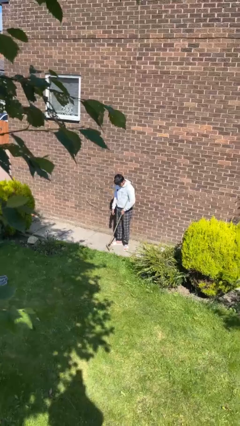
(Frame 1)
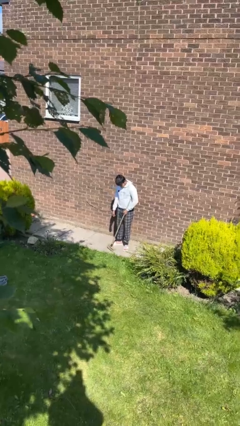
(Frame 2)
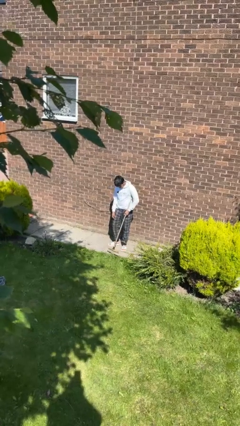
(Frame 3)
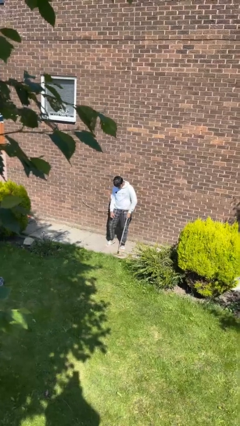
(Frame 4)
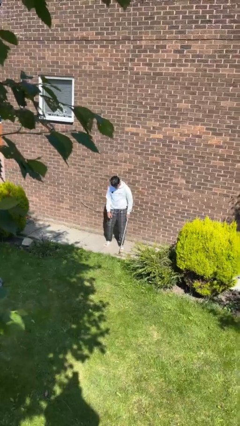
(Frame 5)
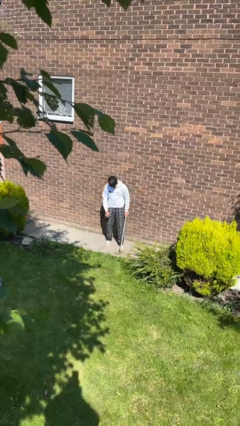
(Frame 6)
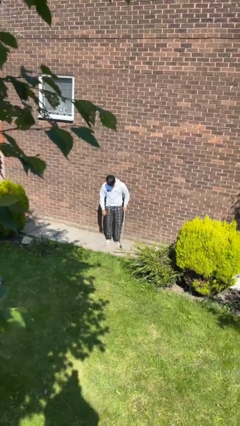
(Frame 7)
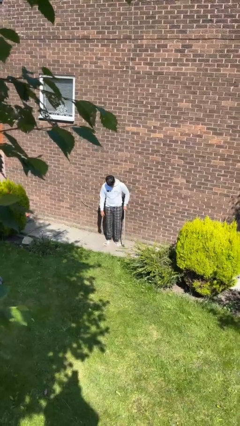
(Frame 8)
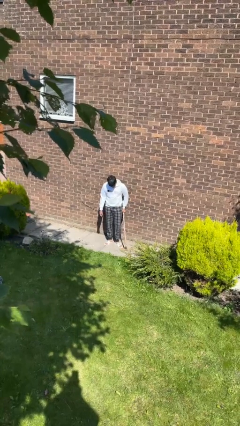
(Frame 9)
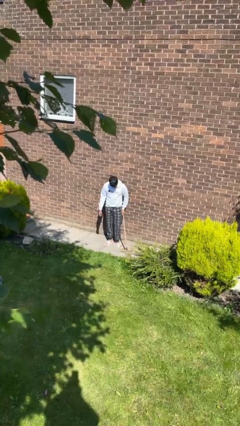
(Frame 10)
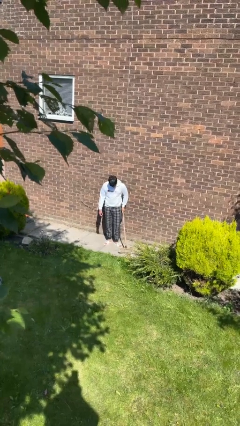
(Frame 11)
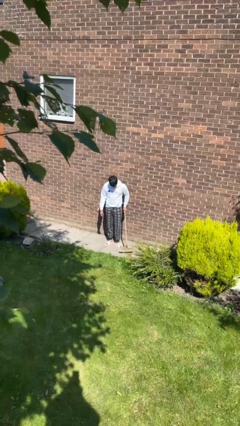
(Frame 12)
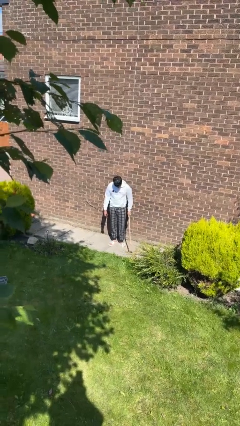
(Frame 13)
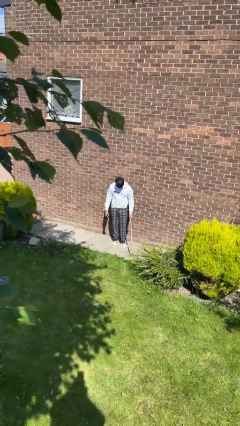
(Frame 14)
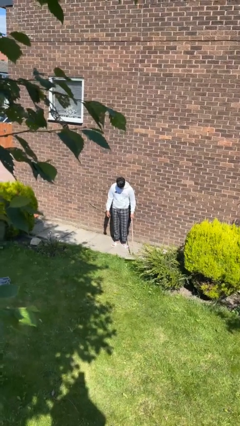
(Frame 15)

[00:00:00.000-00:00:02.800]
person sweeps floor

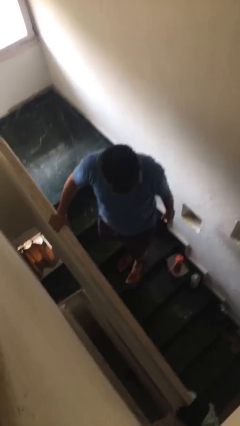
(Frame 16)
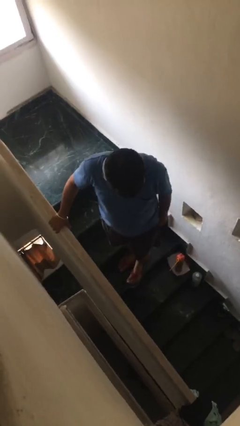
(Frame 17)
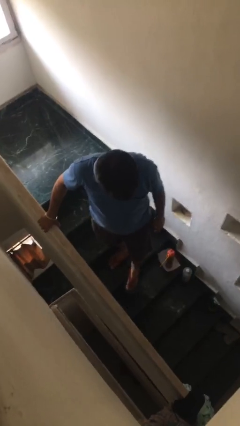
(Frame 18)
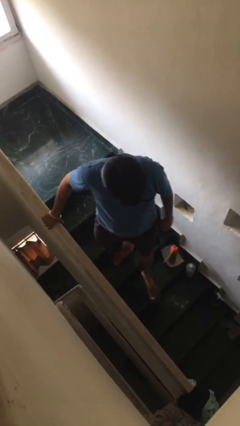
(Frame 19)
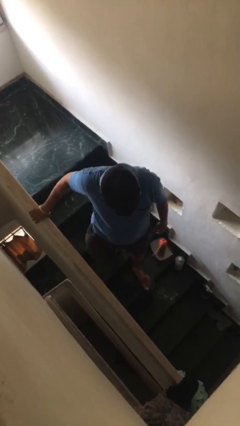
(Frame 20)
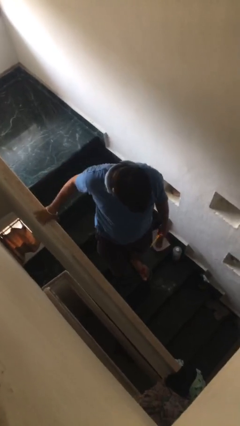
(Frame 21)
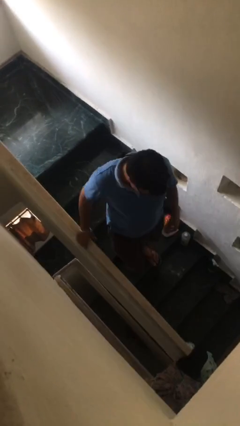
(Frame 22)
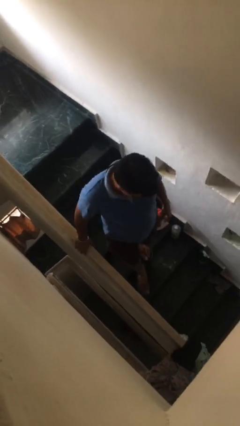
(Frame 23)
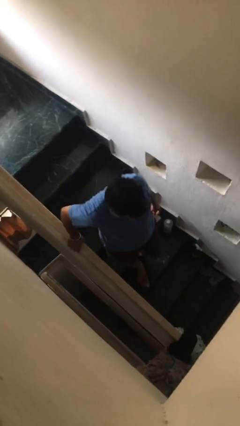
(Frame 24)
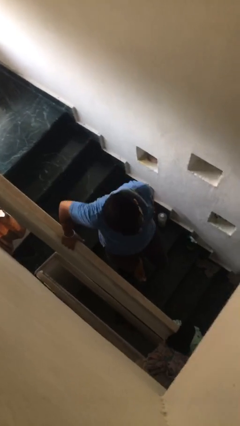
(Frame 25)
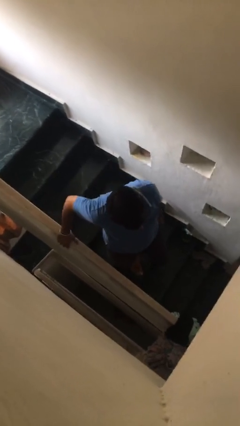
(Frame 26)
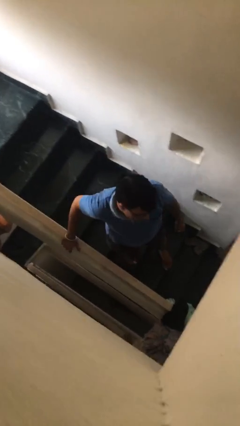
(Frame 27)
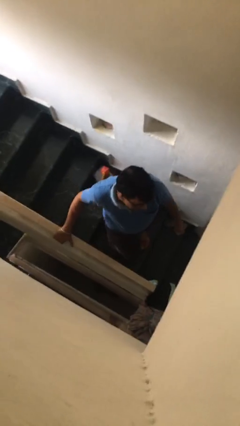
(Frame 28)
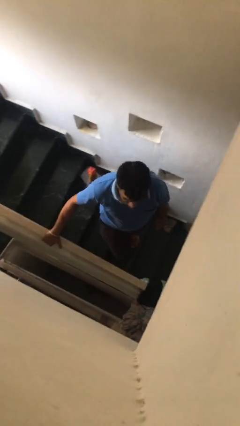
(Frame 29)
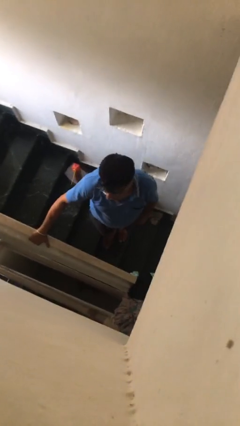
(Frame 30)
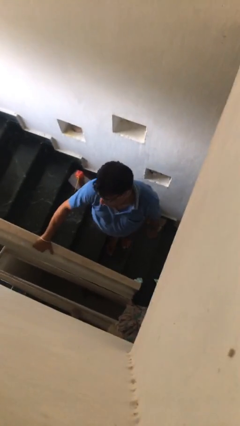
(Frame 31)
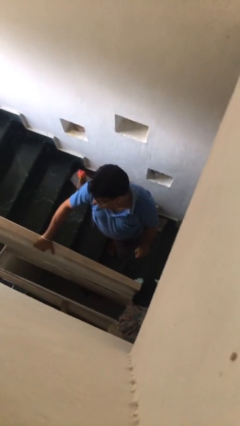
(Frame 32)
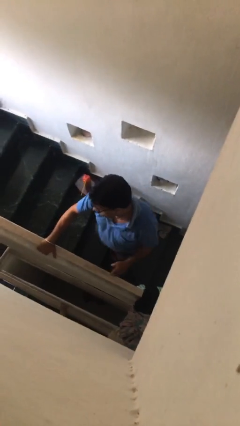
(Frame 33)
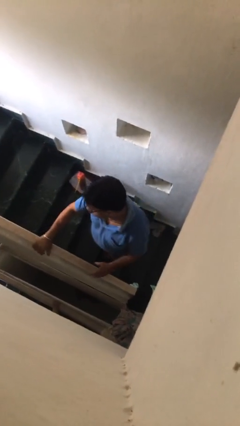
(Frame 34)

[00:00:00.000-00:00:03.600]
person climbs down stairs

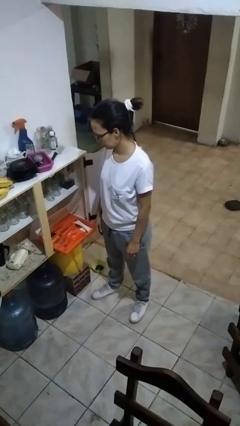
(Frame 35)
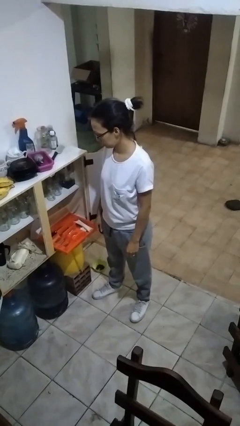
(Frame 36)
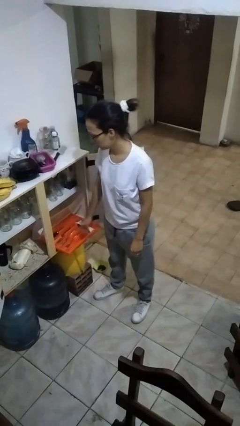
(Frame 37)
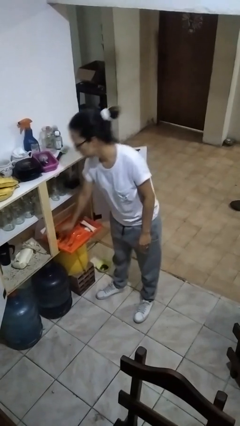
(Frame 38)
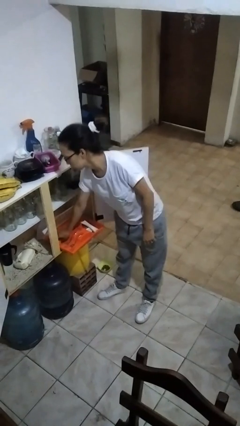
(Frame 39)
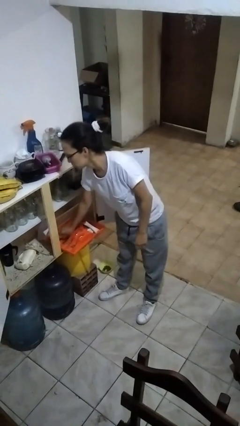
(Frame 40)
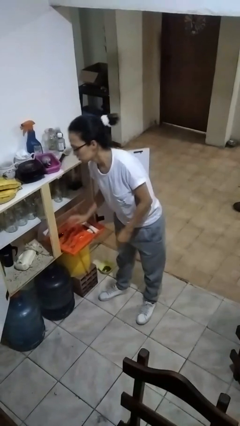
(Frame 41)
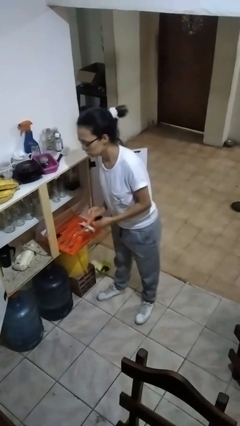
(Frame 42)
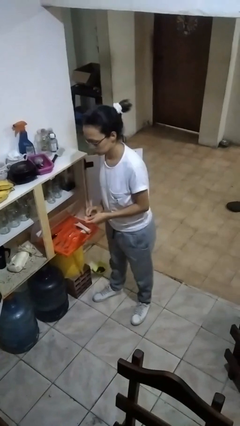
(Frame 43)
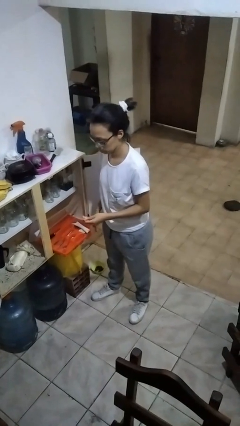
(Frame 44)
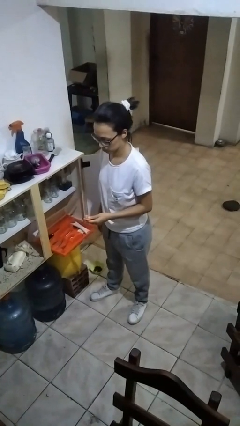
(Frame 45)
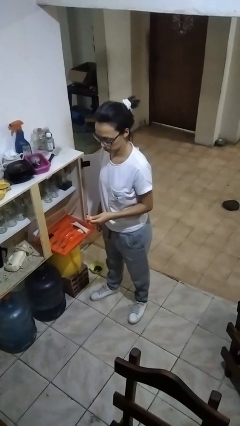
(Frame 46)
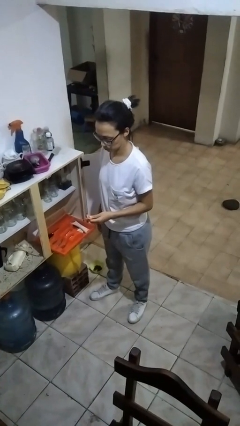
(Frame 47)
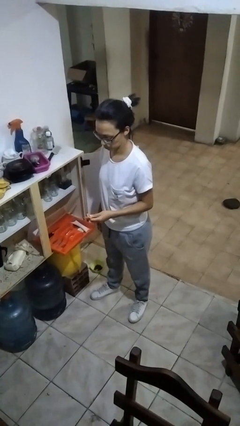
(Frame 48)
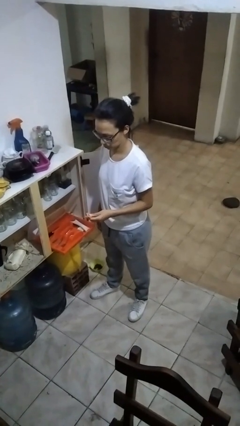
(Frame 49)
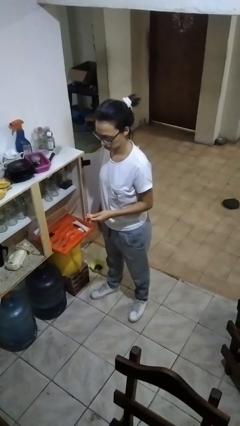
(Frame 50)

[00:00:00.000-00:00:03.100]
person takes object from kitchen drawer

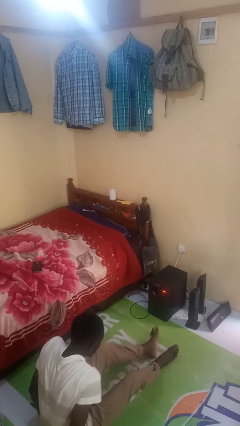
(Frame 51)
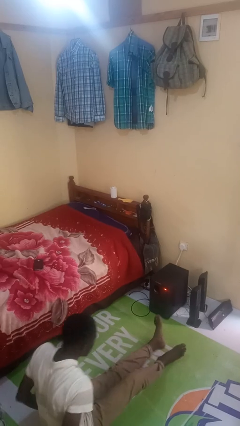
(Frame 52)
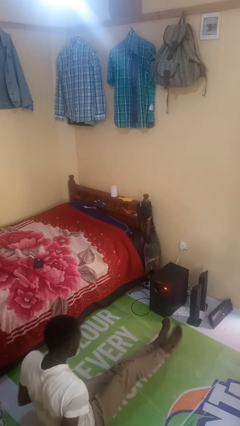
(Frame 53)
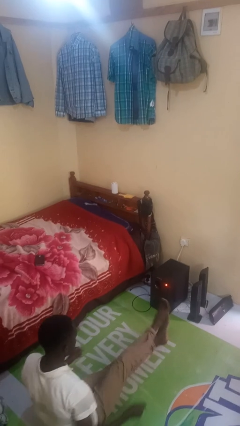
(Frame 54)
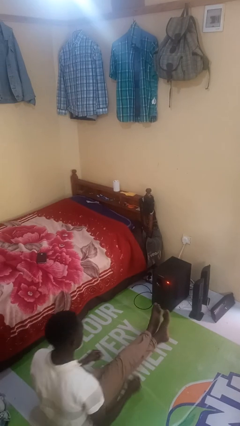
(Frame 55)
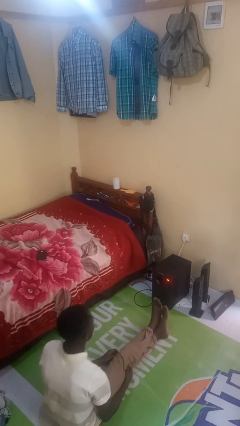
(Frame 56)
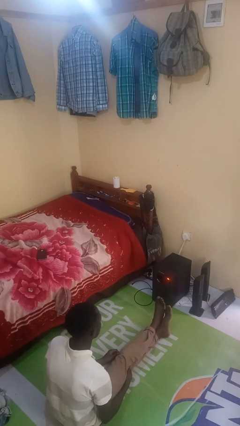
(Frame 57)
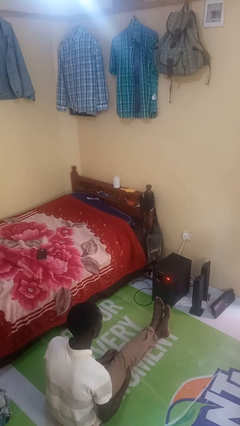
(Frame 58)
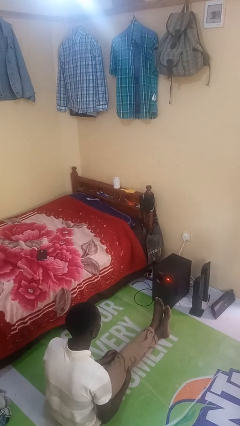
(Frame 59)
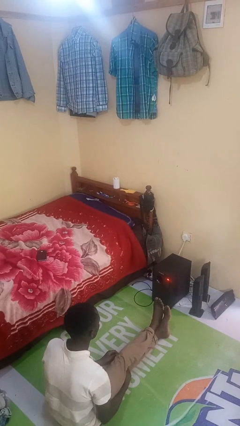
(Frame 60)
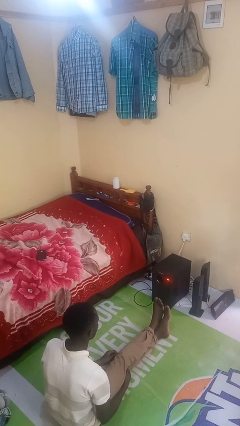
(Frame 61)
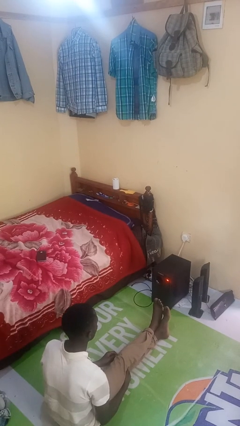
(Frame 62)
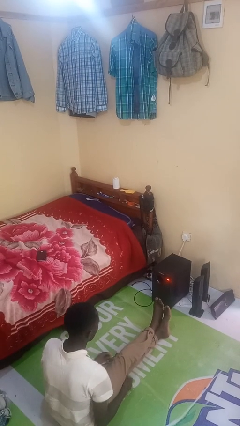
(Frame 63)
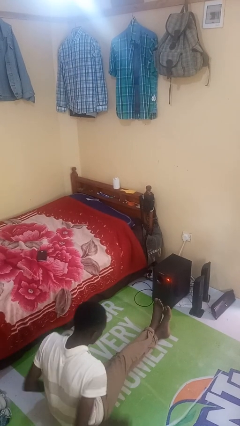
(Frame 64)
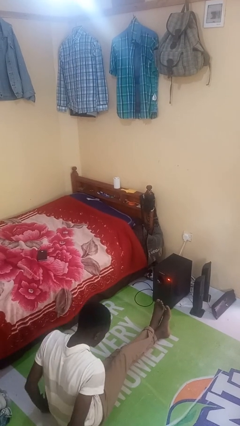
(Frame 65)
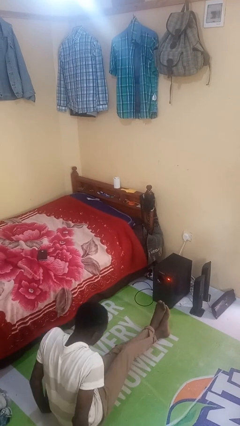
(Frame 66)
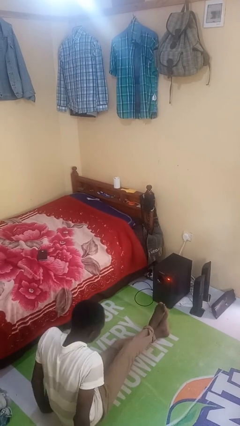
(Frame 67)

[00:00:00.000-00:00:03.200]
person sits crisscross

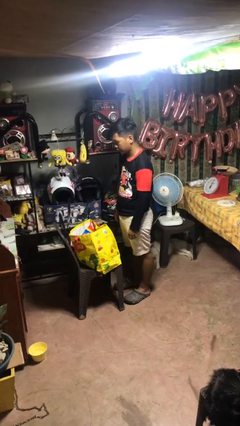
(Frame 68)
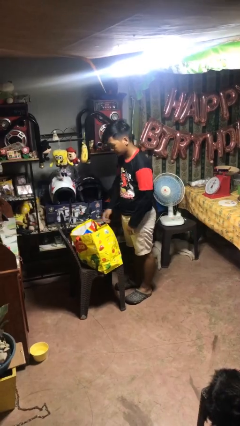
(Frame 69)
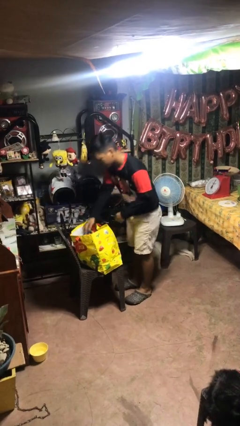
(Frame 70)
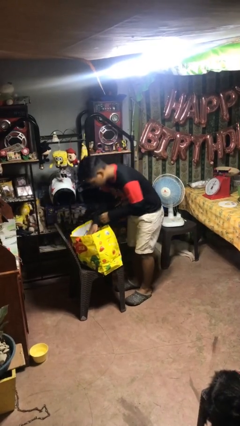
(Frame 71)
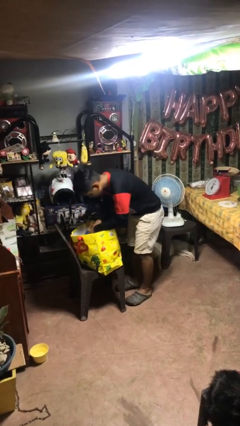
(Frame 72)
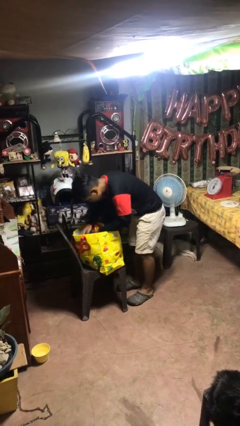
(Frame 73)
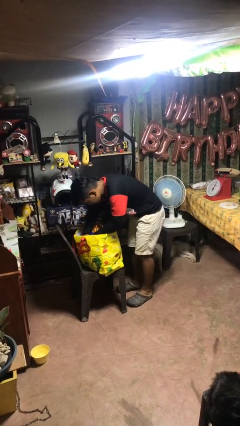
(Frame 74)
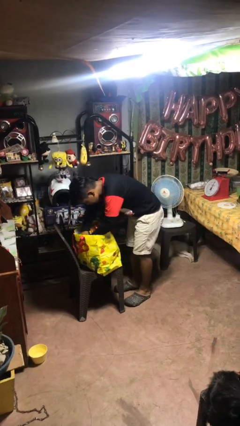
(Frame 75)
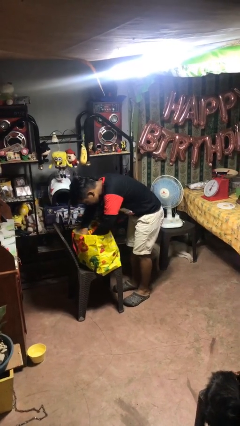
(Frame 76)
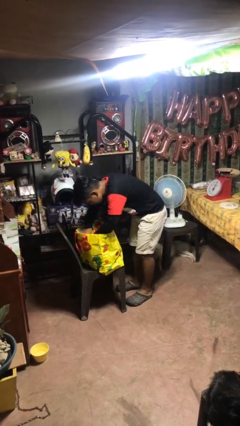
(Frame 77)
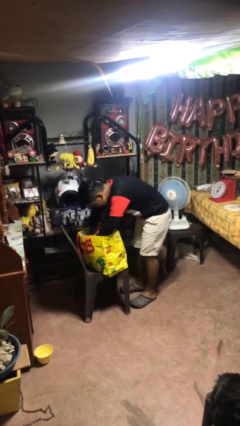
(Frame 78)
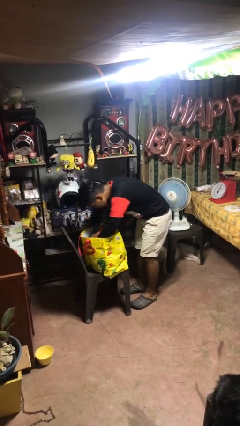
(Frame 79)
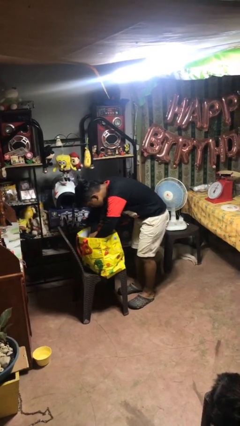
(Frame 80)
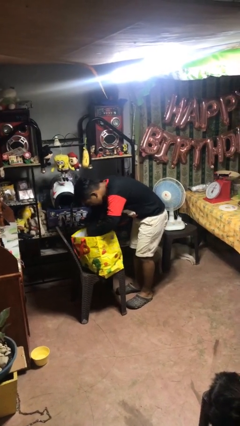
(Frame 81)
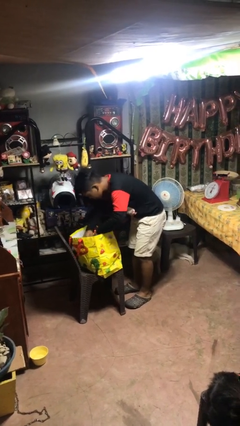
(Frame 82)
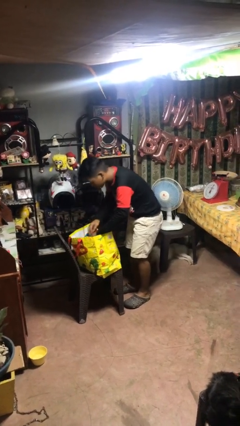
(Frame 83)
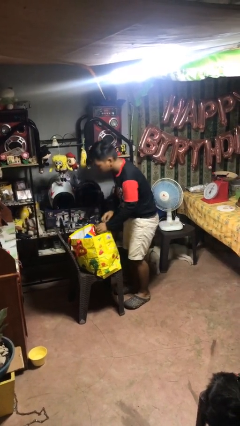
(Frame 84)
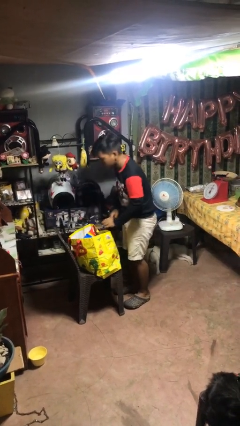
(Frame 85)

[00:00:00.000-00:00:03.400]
person searches in bag

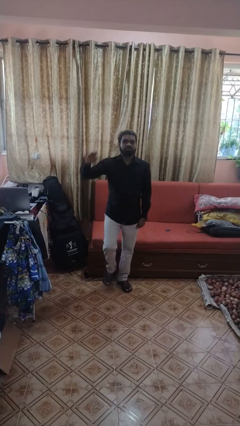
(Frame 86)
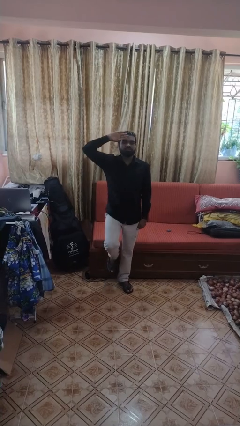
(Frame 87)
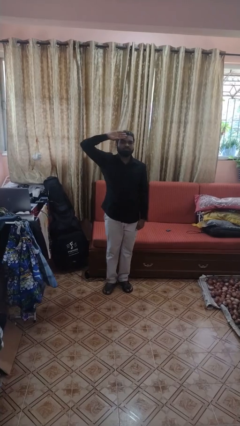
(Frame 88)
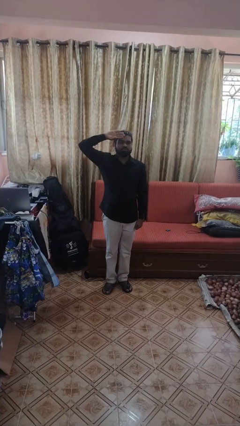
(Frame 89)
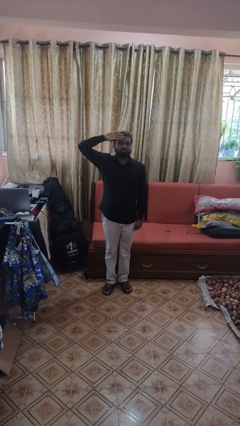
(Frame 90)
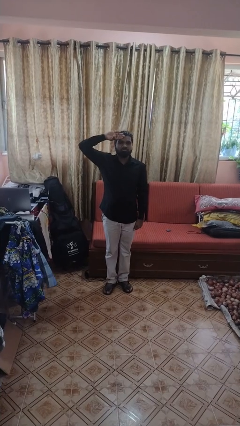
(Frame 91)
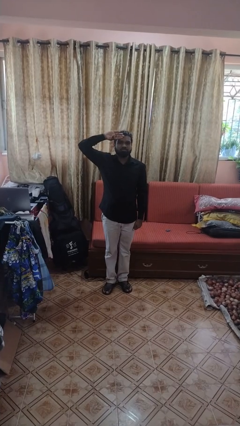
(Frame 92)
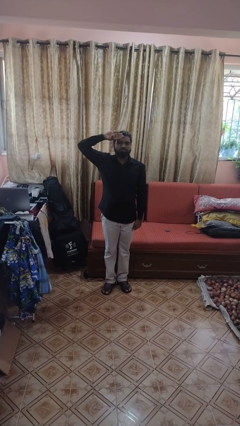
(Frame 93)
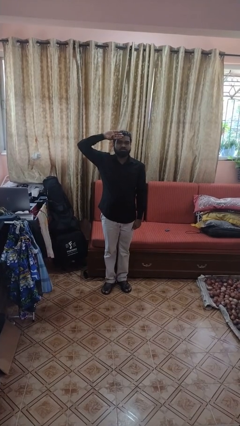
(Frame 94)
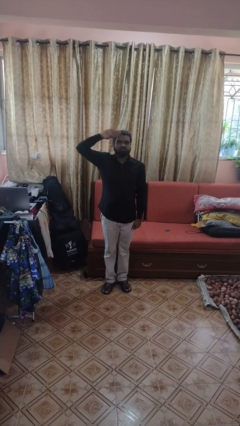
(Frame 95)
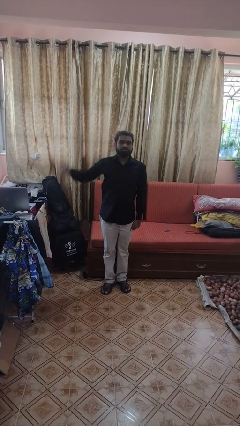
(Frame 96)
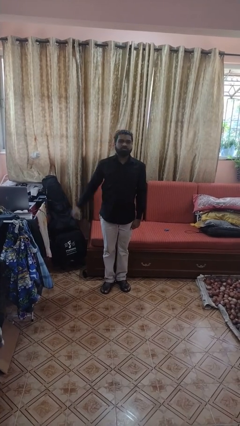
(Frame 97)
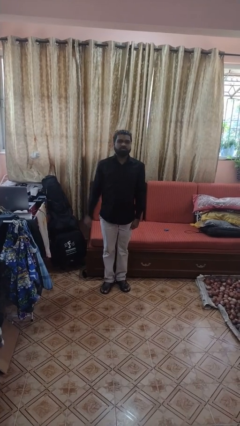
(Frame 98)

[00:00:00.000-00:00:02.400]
person salutes
